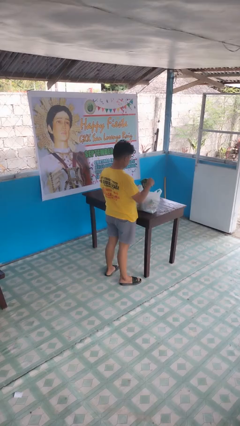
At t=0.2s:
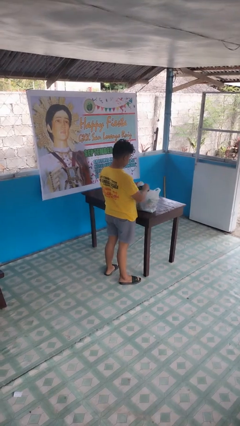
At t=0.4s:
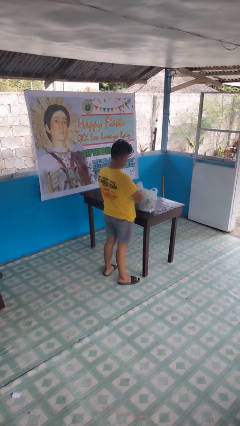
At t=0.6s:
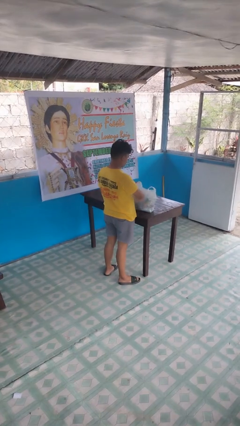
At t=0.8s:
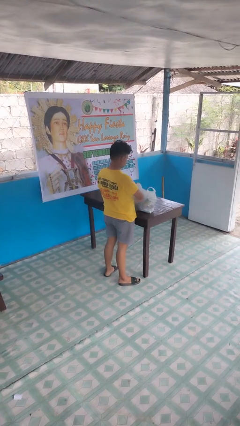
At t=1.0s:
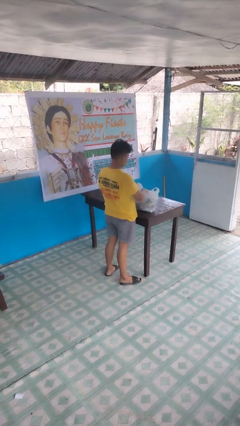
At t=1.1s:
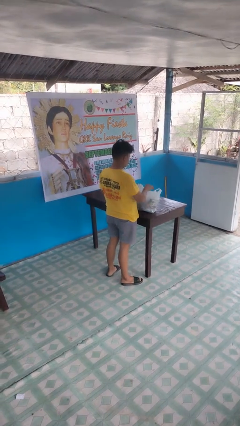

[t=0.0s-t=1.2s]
person puts object into bag

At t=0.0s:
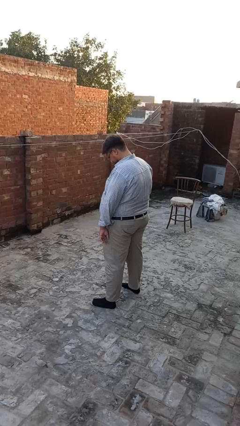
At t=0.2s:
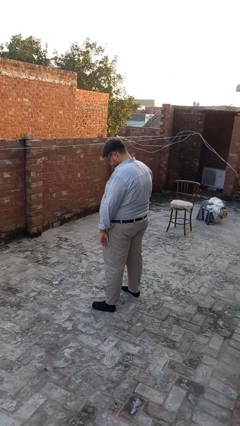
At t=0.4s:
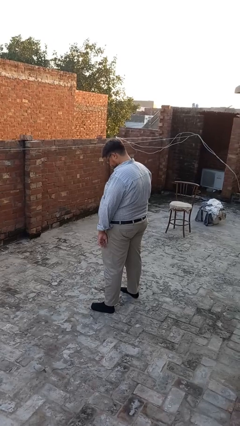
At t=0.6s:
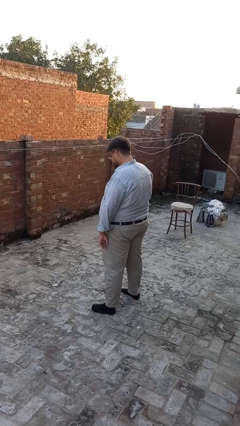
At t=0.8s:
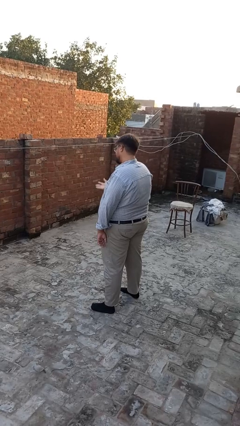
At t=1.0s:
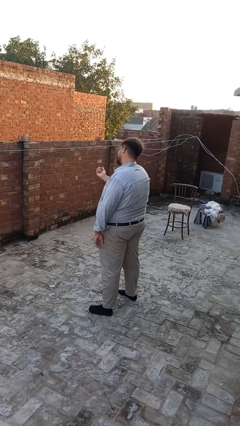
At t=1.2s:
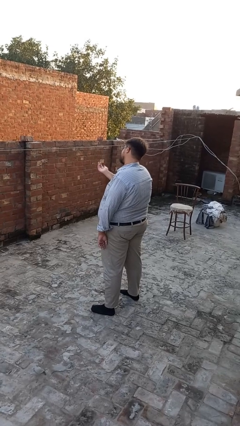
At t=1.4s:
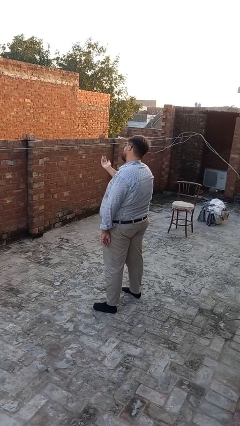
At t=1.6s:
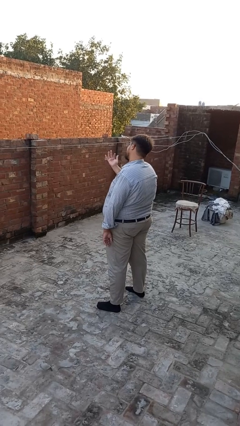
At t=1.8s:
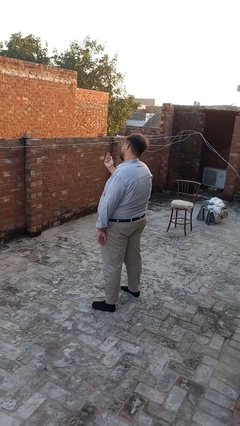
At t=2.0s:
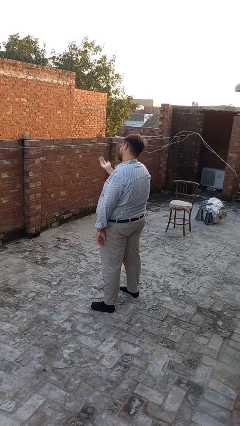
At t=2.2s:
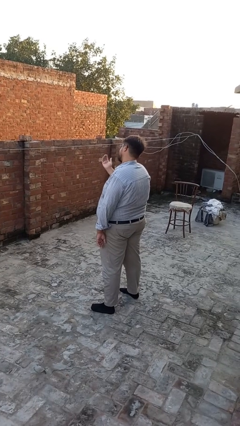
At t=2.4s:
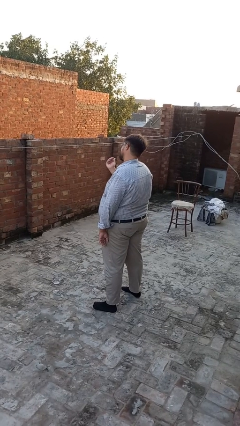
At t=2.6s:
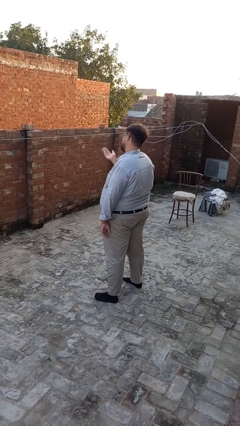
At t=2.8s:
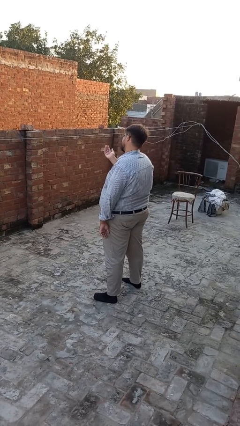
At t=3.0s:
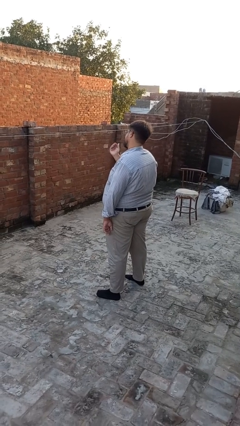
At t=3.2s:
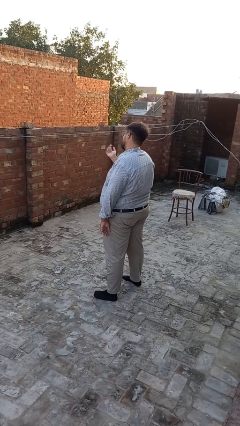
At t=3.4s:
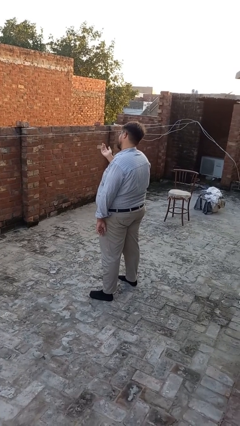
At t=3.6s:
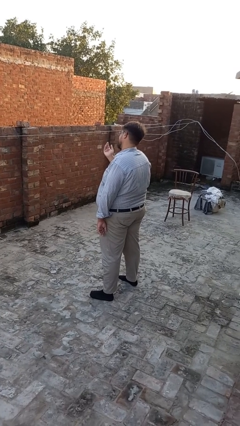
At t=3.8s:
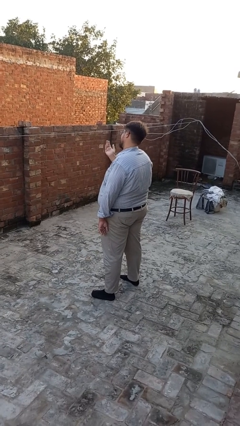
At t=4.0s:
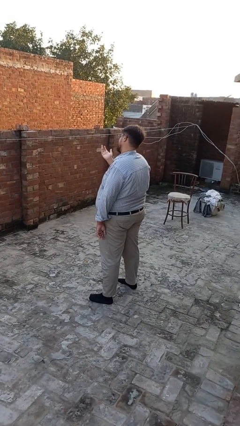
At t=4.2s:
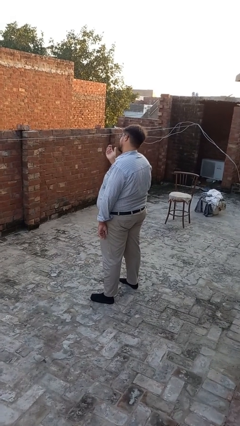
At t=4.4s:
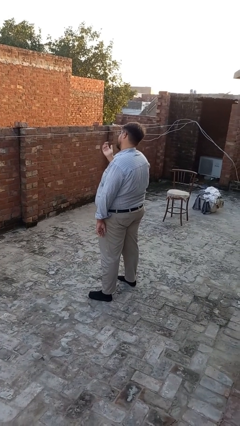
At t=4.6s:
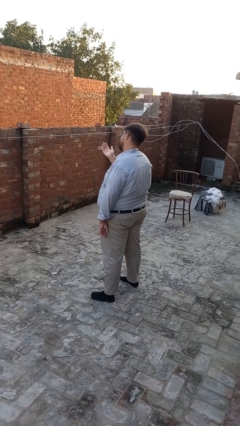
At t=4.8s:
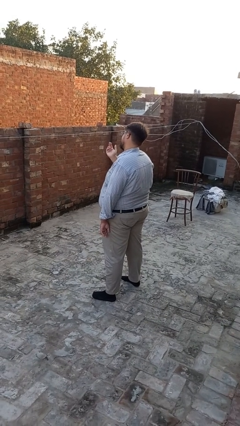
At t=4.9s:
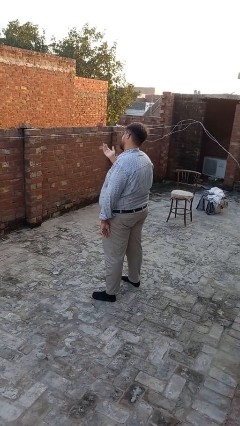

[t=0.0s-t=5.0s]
person gestures come here

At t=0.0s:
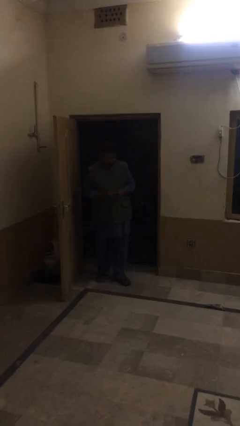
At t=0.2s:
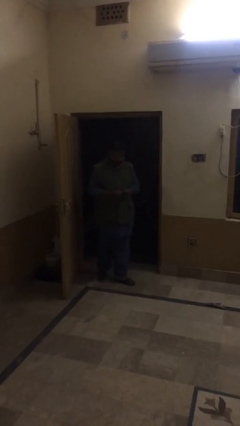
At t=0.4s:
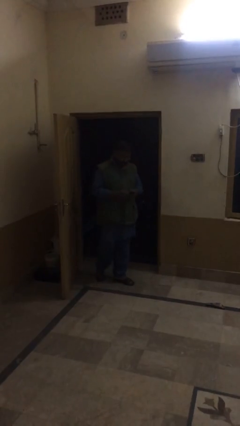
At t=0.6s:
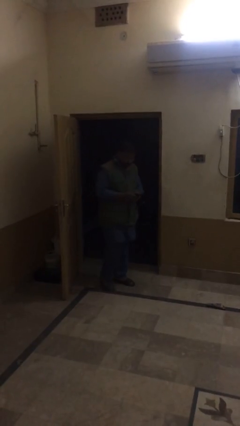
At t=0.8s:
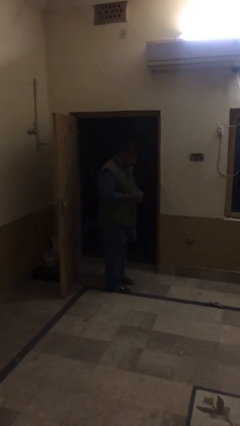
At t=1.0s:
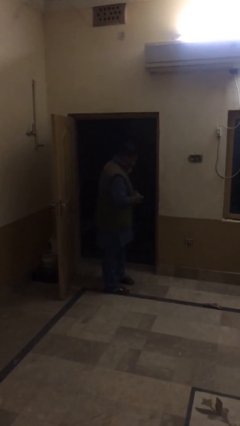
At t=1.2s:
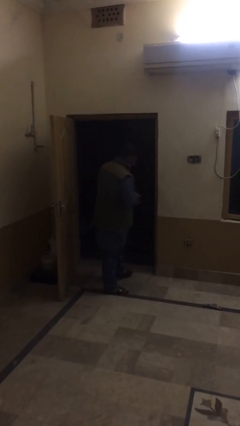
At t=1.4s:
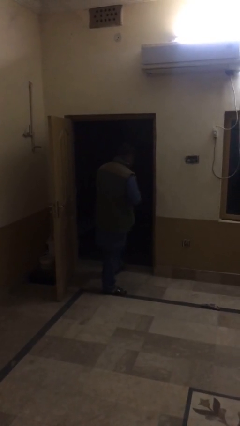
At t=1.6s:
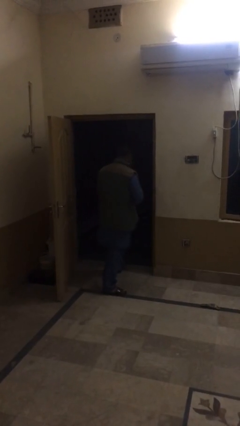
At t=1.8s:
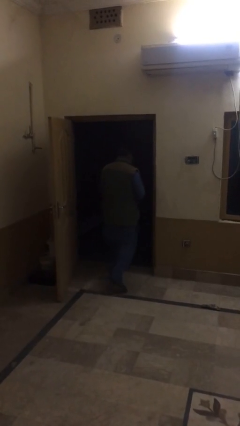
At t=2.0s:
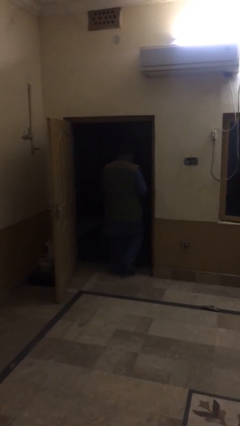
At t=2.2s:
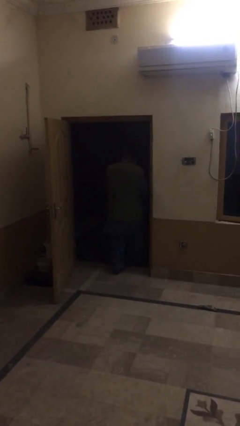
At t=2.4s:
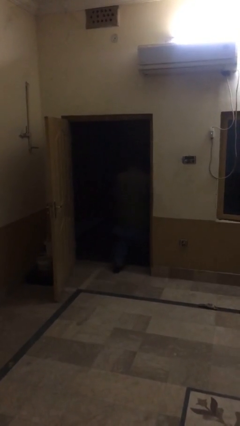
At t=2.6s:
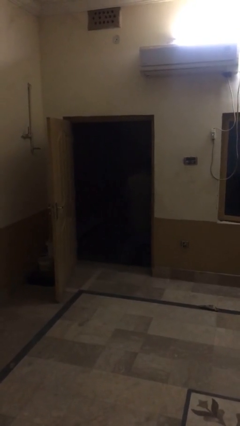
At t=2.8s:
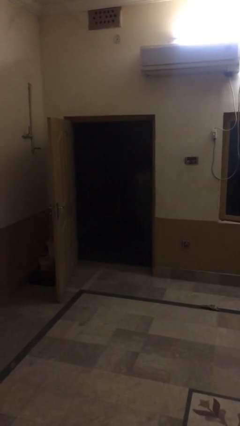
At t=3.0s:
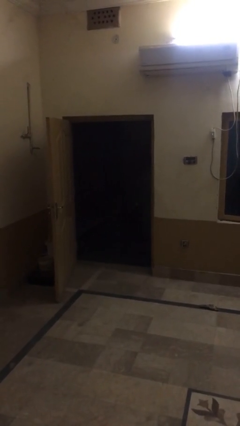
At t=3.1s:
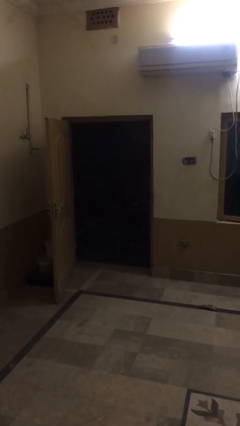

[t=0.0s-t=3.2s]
person exits scene through structure

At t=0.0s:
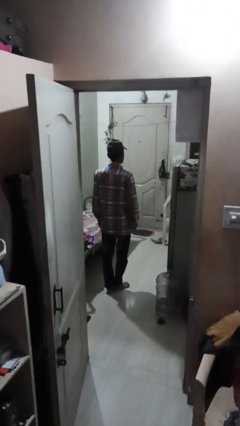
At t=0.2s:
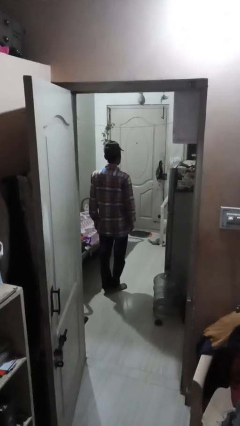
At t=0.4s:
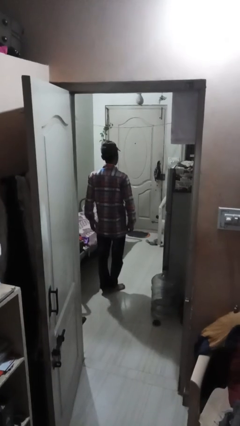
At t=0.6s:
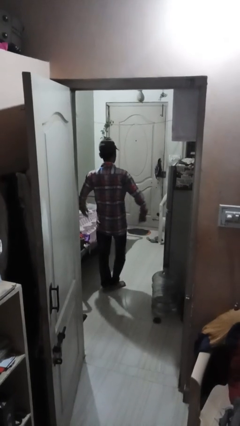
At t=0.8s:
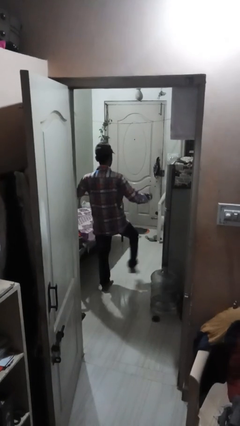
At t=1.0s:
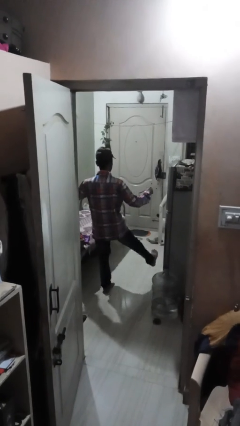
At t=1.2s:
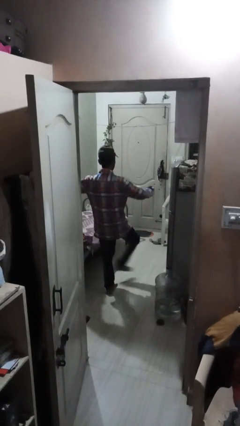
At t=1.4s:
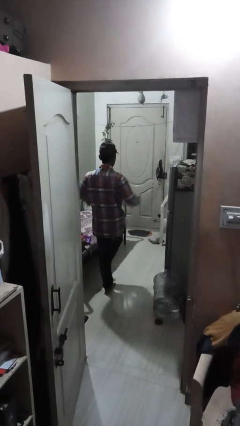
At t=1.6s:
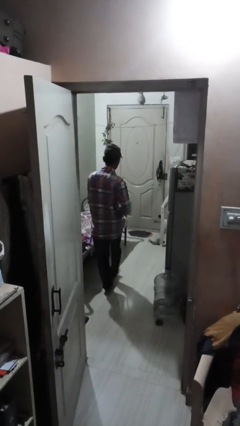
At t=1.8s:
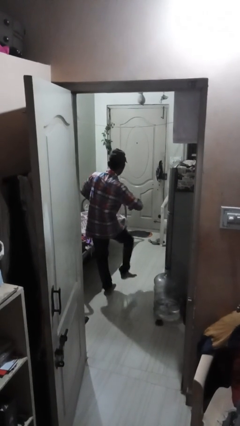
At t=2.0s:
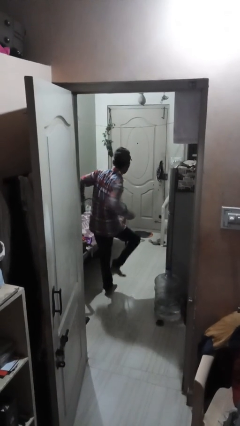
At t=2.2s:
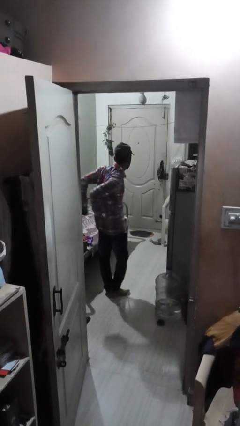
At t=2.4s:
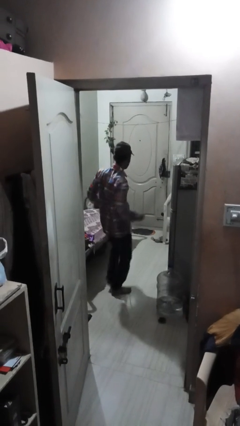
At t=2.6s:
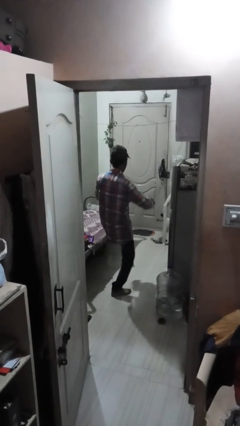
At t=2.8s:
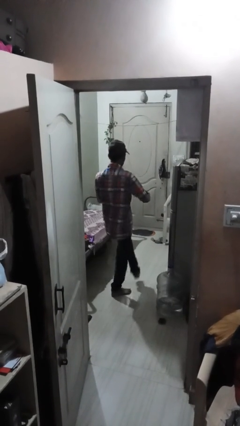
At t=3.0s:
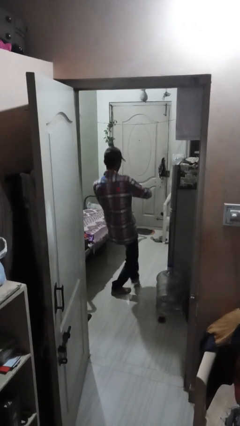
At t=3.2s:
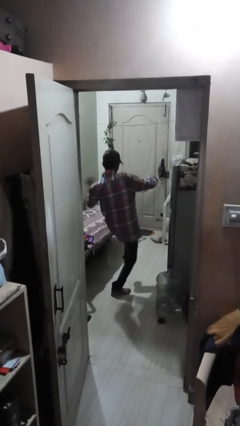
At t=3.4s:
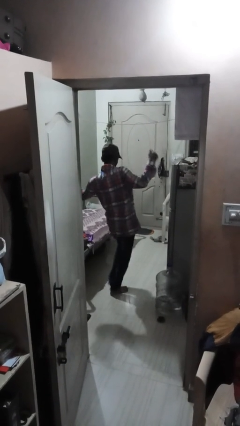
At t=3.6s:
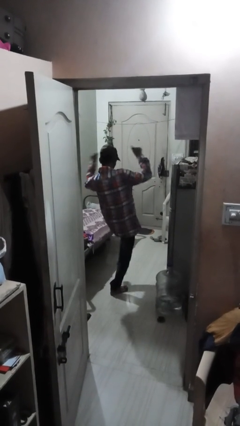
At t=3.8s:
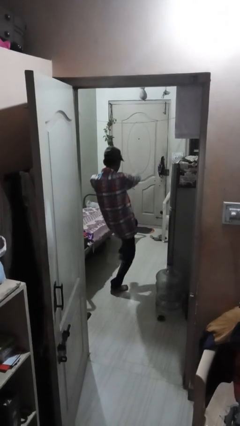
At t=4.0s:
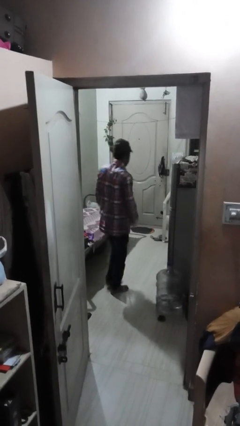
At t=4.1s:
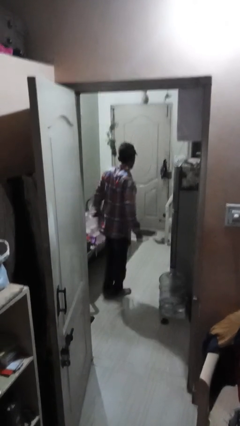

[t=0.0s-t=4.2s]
person dances in place

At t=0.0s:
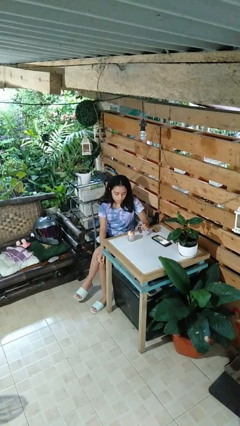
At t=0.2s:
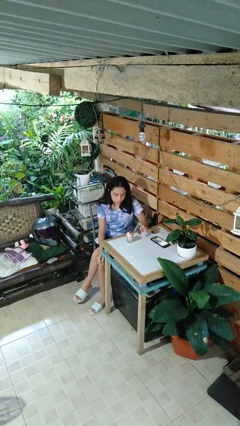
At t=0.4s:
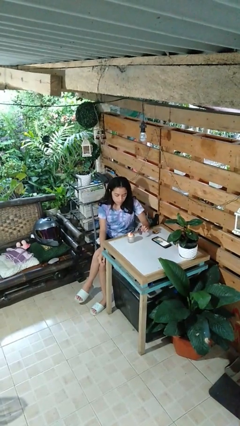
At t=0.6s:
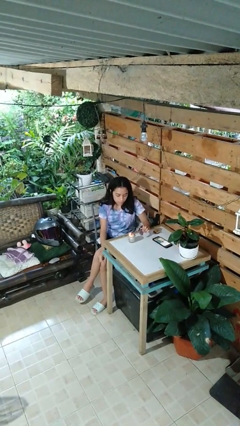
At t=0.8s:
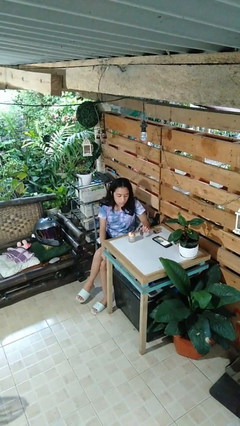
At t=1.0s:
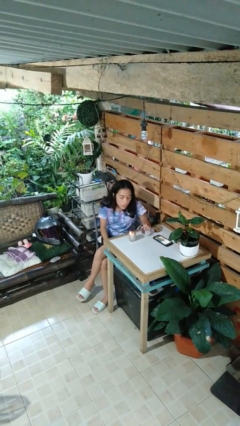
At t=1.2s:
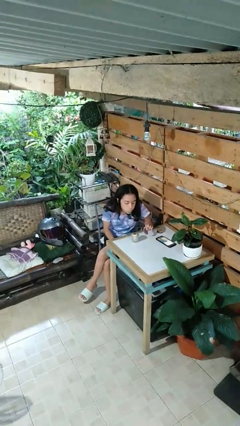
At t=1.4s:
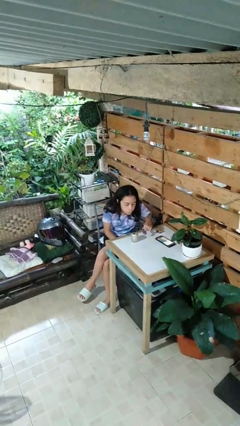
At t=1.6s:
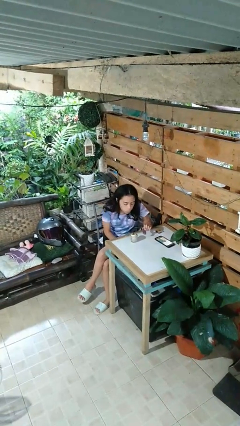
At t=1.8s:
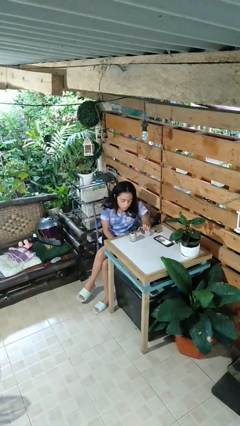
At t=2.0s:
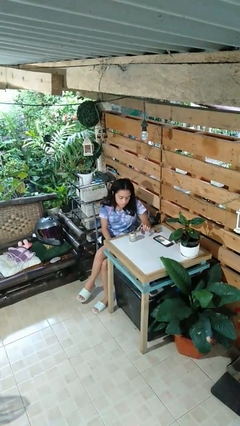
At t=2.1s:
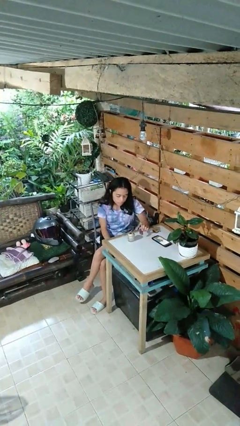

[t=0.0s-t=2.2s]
person extinguishes candle

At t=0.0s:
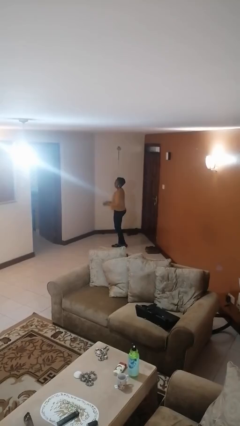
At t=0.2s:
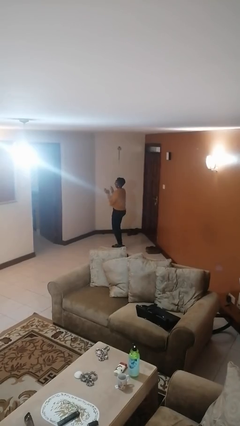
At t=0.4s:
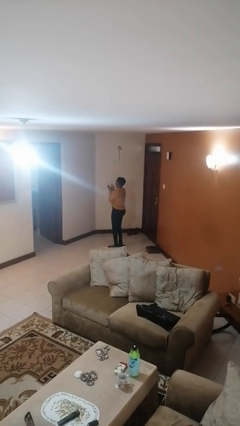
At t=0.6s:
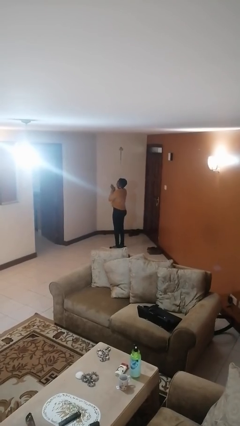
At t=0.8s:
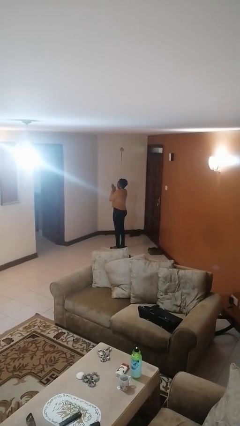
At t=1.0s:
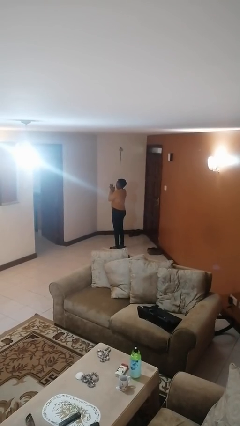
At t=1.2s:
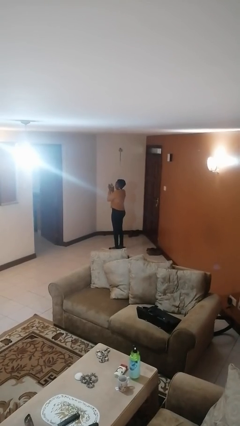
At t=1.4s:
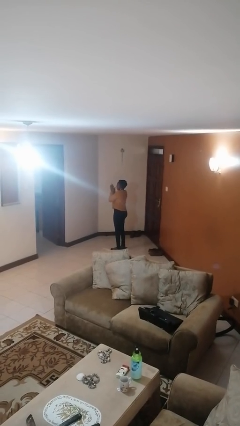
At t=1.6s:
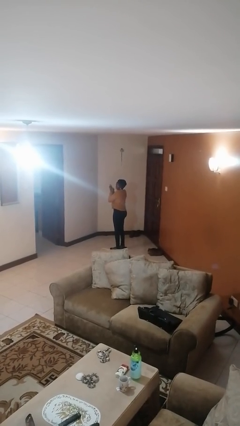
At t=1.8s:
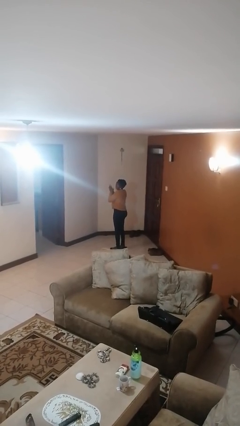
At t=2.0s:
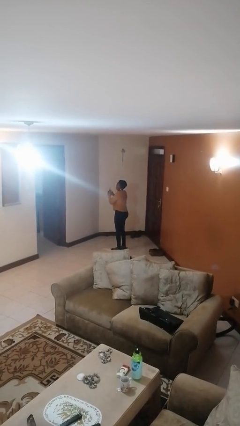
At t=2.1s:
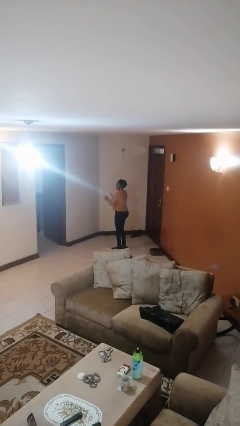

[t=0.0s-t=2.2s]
person claps hands
